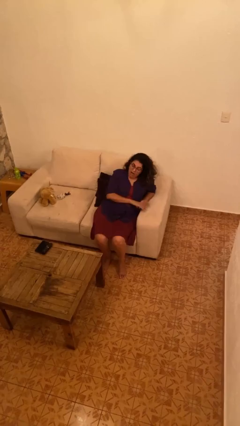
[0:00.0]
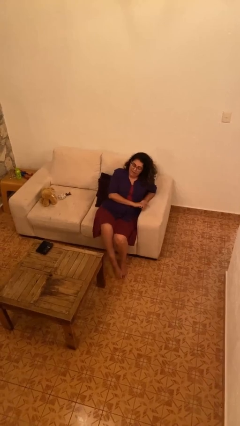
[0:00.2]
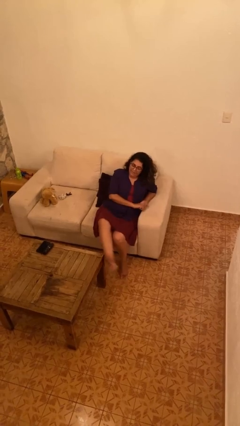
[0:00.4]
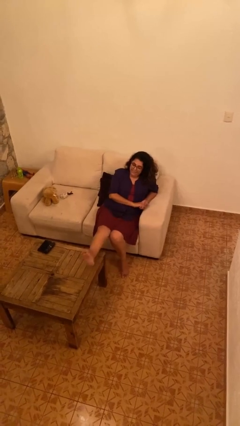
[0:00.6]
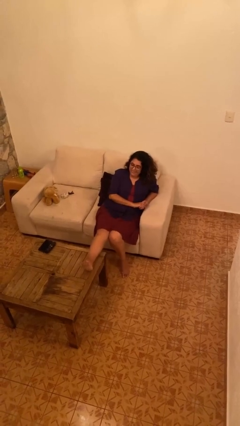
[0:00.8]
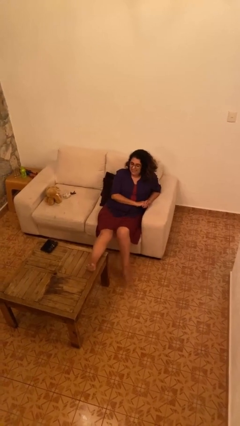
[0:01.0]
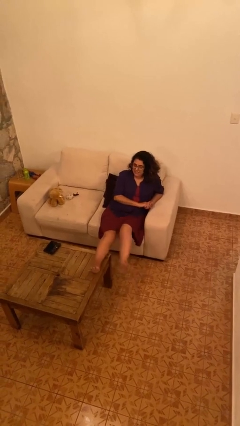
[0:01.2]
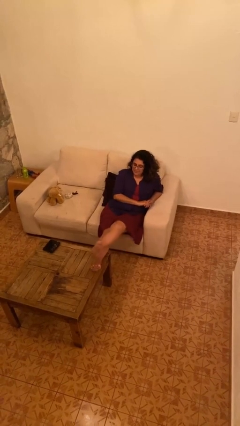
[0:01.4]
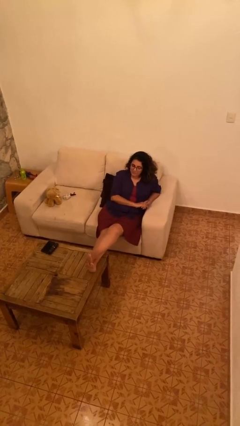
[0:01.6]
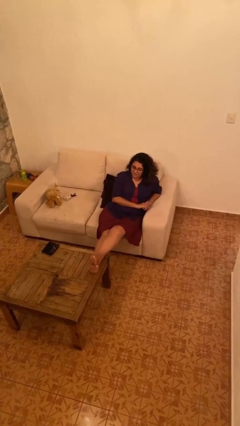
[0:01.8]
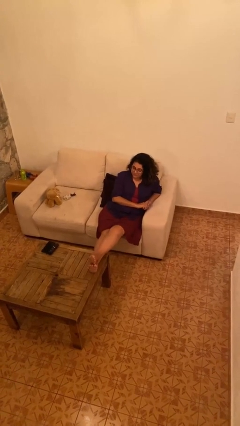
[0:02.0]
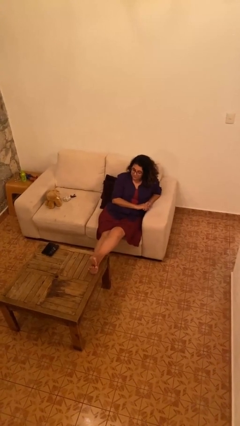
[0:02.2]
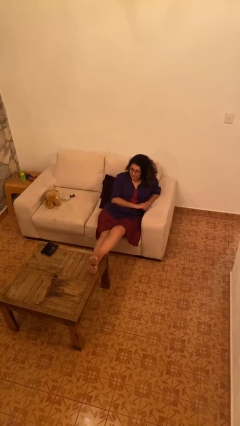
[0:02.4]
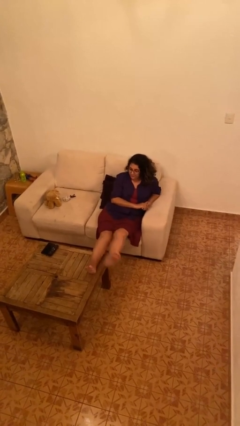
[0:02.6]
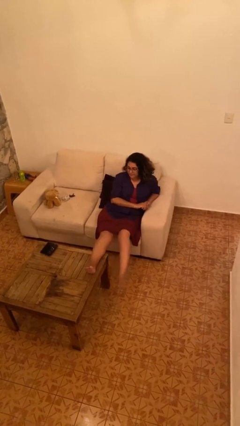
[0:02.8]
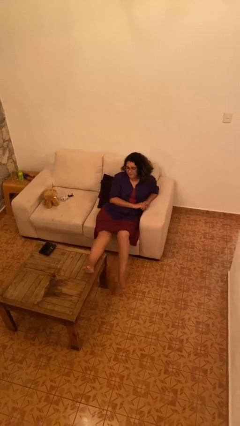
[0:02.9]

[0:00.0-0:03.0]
person puts feet up

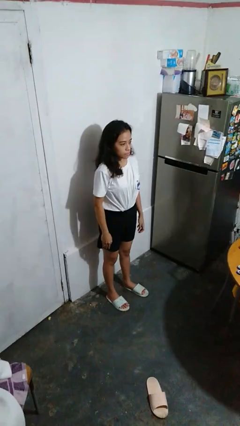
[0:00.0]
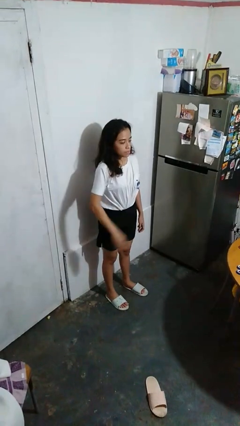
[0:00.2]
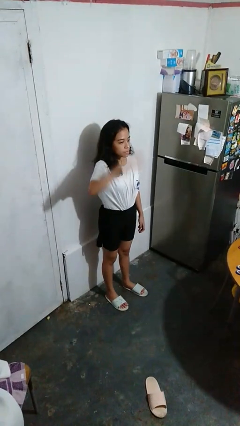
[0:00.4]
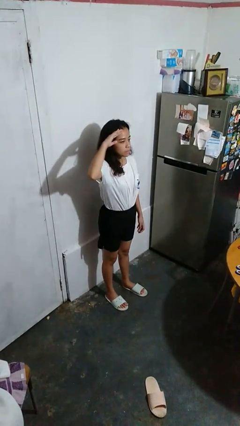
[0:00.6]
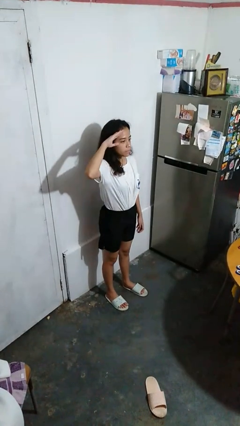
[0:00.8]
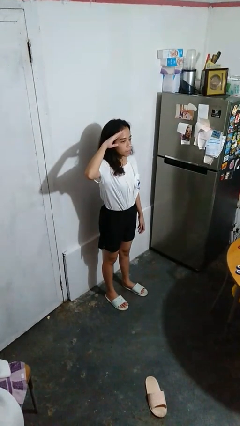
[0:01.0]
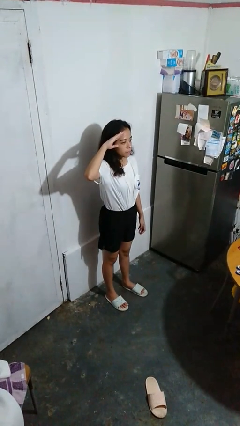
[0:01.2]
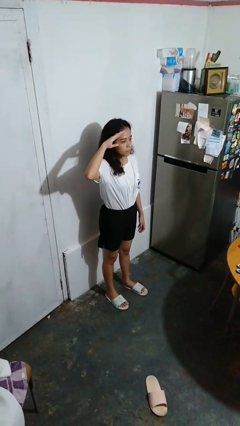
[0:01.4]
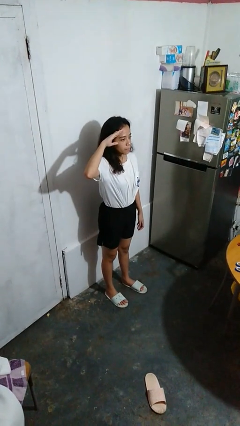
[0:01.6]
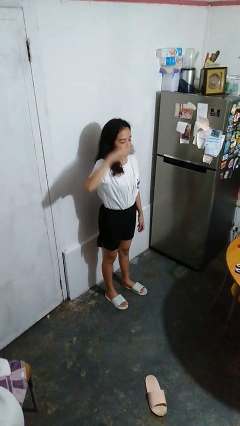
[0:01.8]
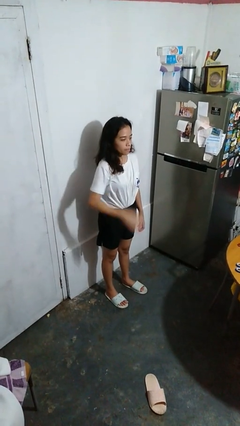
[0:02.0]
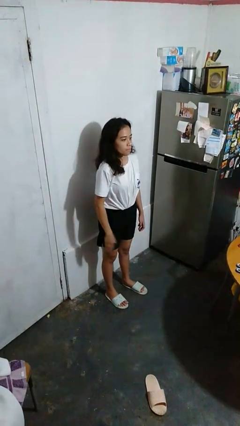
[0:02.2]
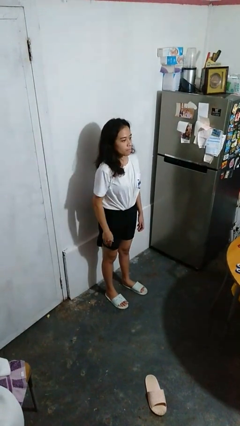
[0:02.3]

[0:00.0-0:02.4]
person salutes

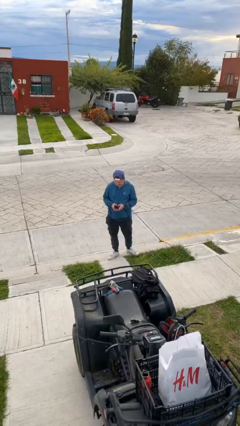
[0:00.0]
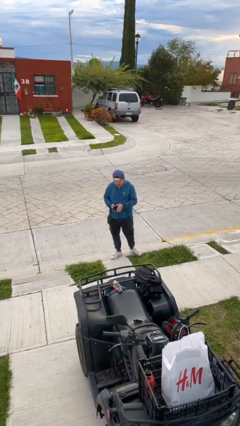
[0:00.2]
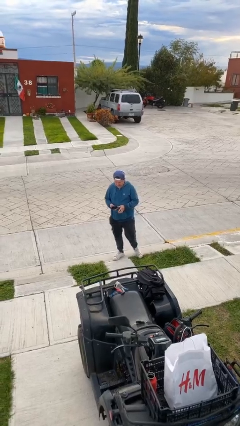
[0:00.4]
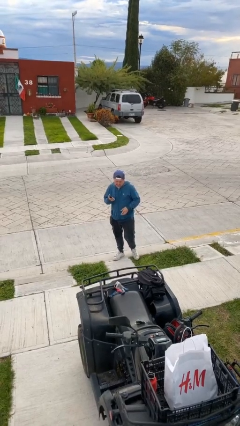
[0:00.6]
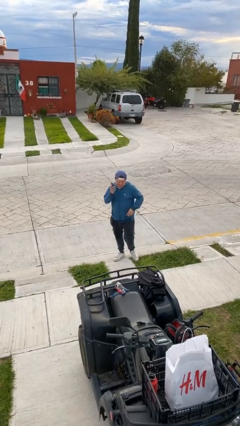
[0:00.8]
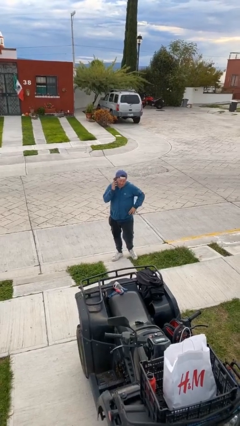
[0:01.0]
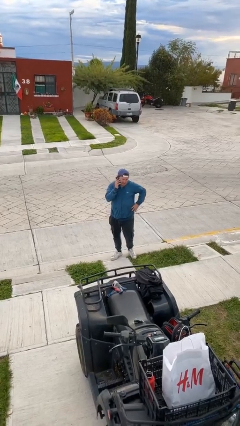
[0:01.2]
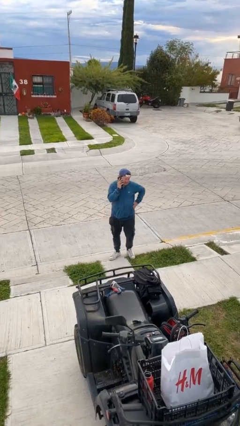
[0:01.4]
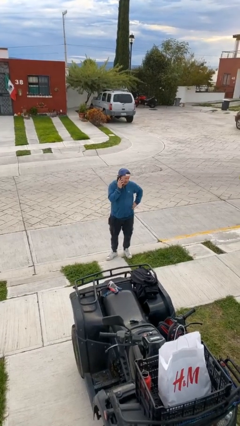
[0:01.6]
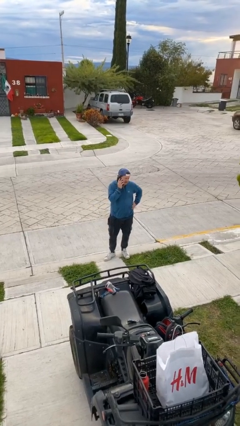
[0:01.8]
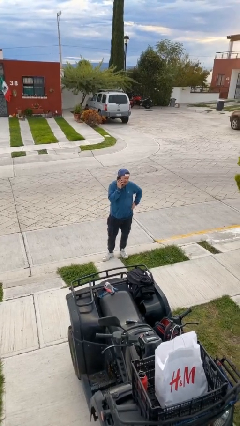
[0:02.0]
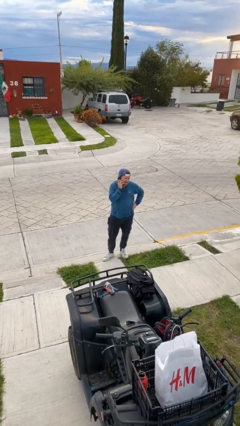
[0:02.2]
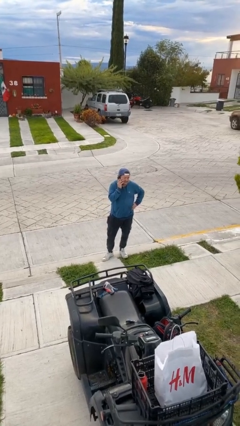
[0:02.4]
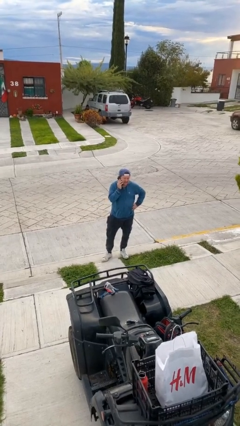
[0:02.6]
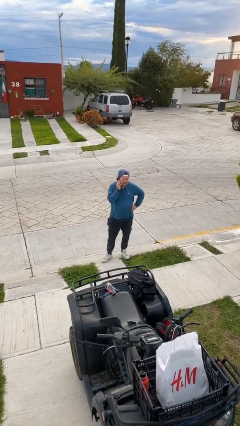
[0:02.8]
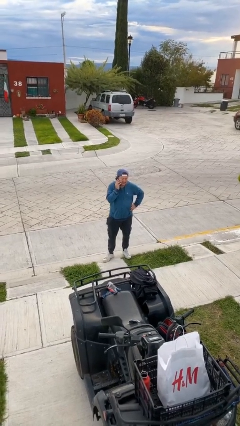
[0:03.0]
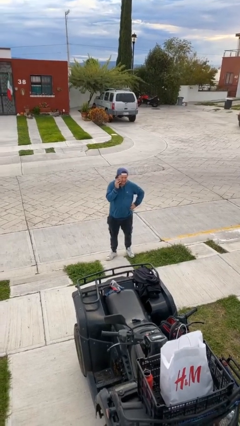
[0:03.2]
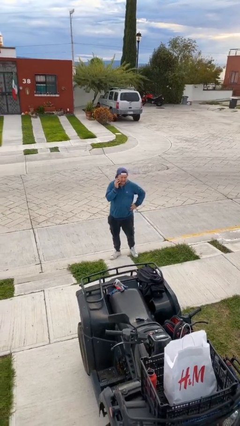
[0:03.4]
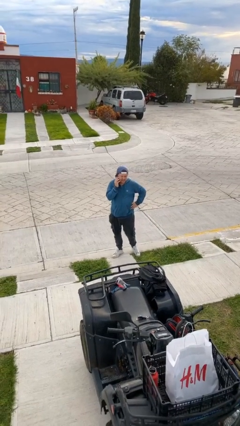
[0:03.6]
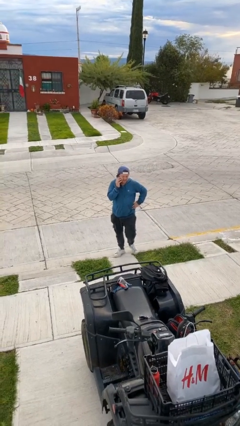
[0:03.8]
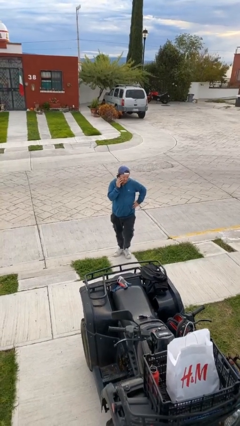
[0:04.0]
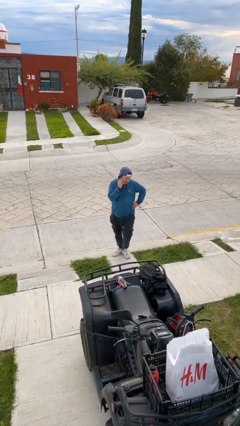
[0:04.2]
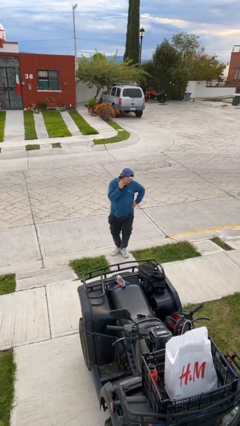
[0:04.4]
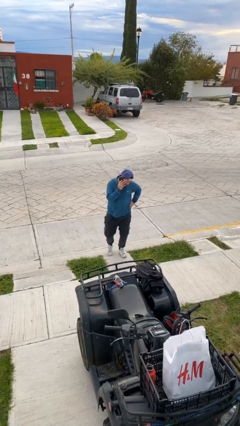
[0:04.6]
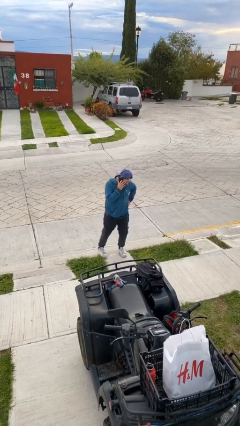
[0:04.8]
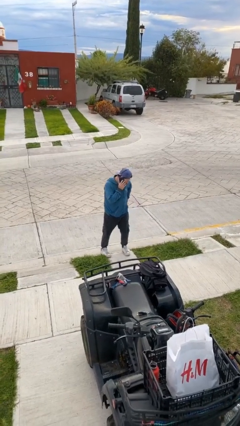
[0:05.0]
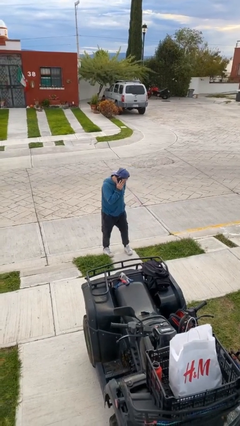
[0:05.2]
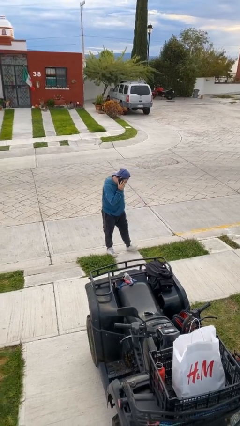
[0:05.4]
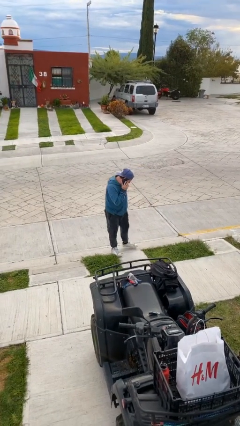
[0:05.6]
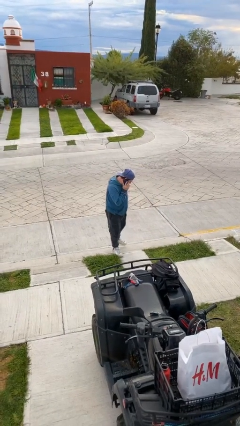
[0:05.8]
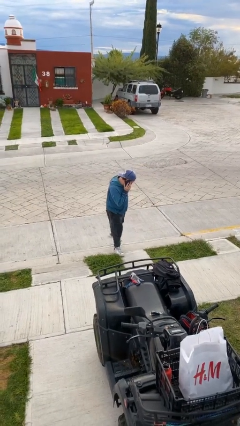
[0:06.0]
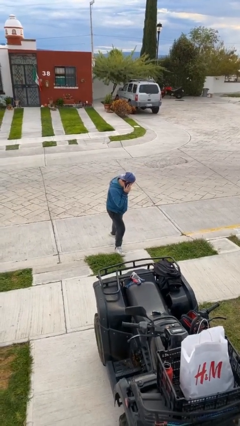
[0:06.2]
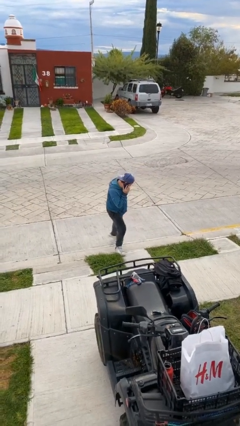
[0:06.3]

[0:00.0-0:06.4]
person talks on phone

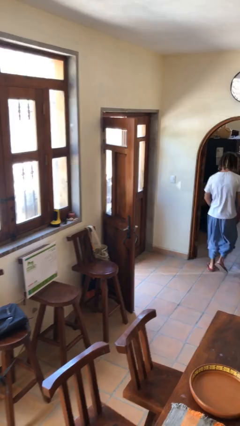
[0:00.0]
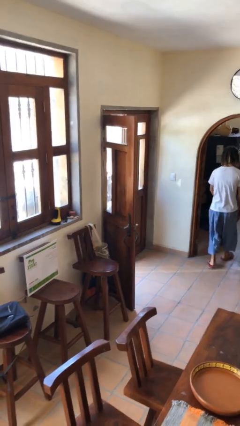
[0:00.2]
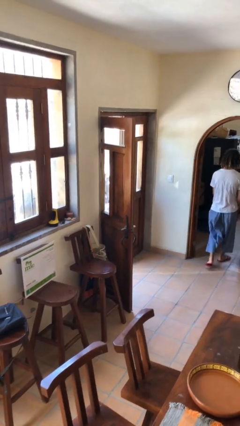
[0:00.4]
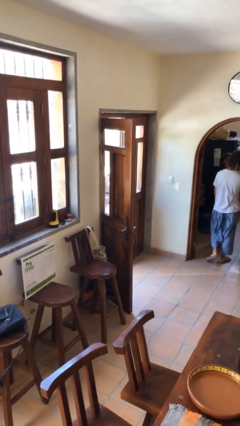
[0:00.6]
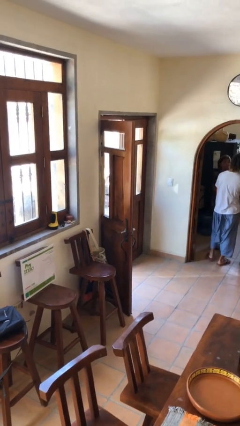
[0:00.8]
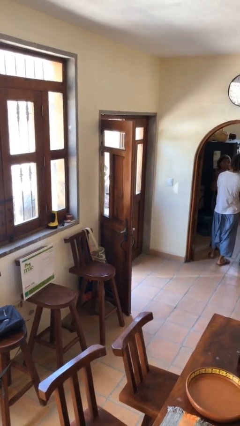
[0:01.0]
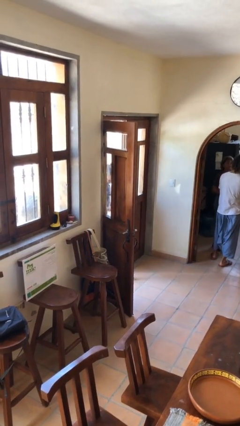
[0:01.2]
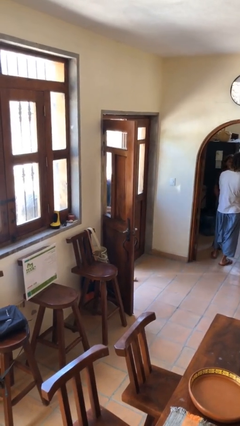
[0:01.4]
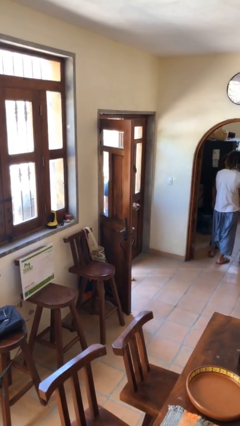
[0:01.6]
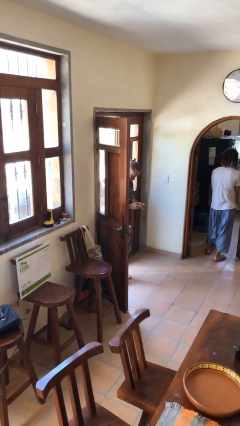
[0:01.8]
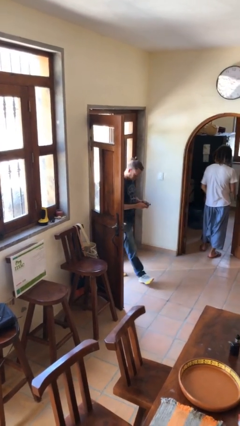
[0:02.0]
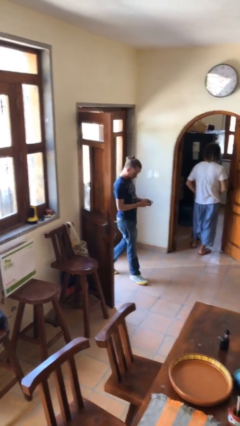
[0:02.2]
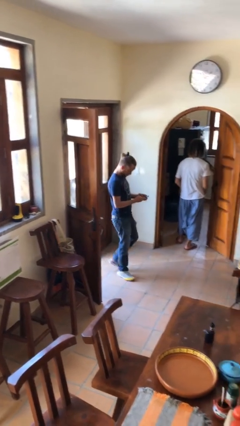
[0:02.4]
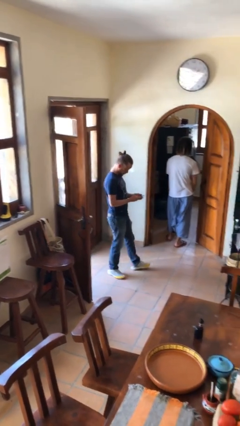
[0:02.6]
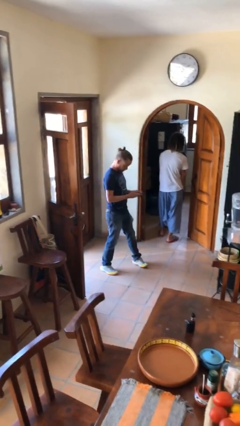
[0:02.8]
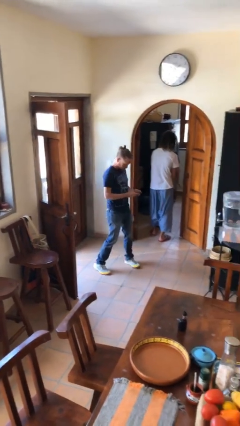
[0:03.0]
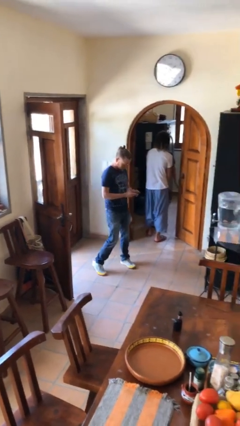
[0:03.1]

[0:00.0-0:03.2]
person enters scene through structure

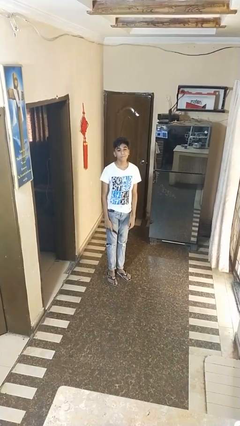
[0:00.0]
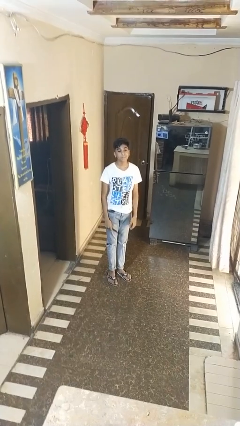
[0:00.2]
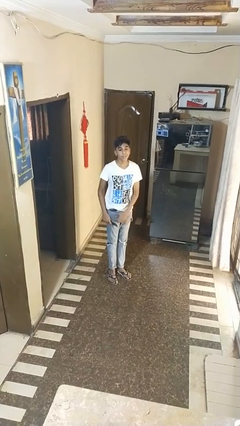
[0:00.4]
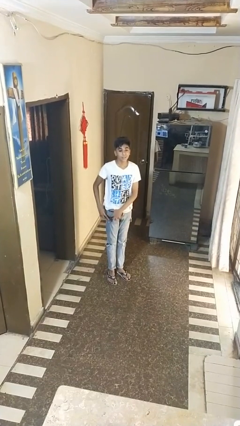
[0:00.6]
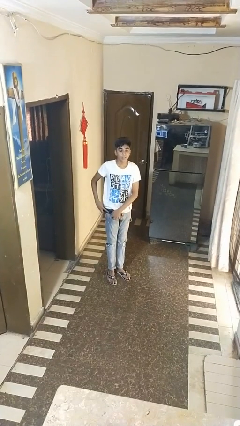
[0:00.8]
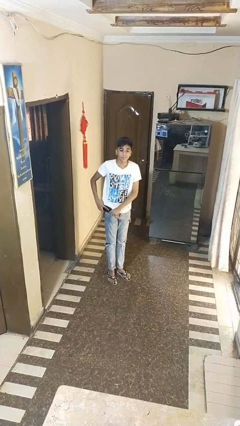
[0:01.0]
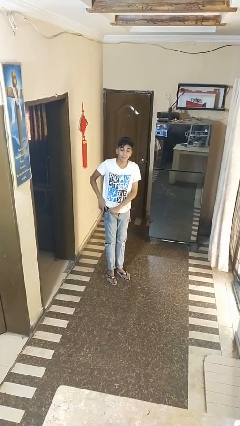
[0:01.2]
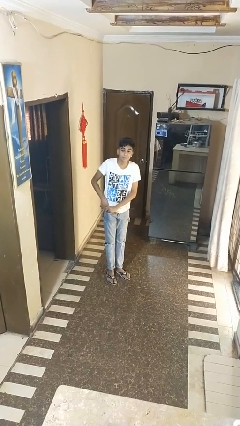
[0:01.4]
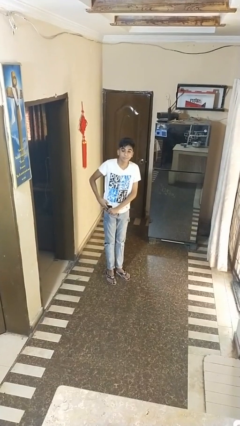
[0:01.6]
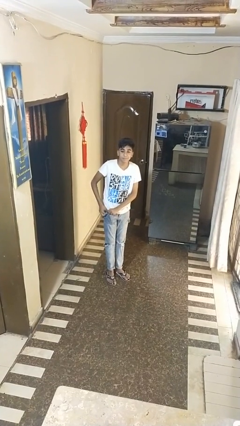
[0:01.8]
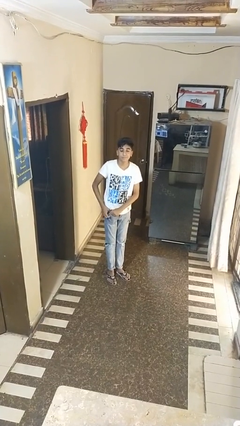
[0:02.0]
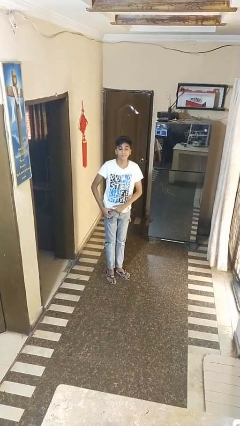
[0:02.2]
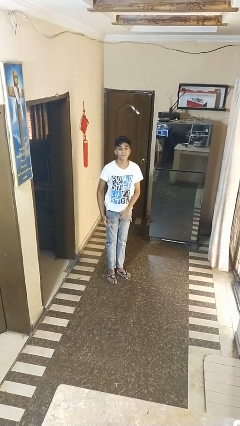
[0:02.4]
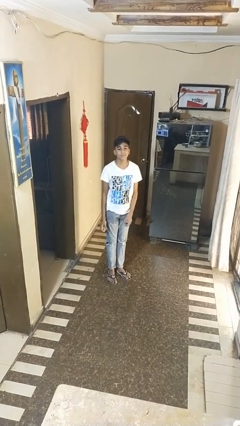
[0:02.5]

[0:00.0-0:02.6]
person puts phone into pocket
